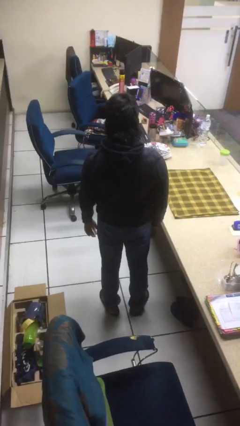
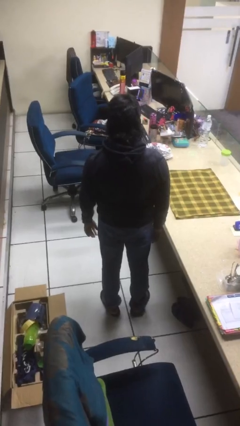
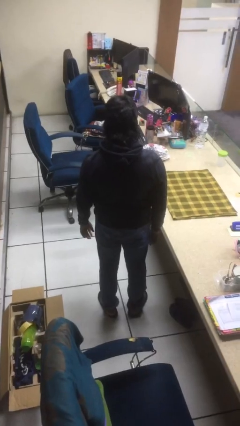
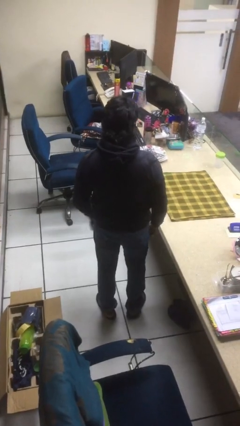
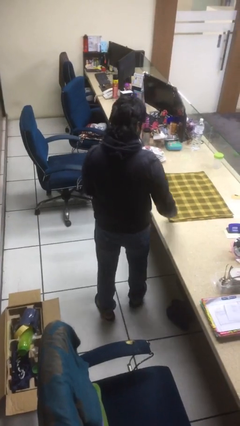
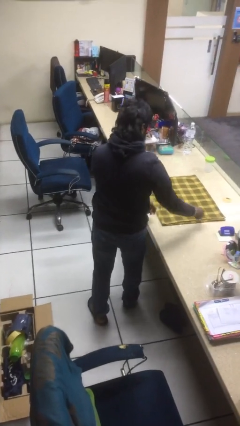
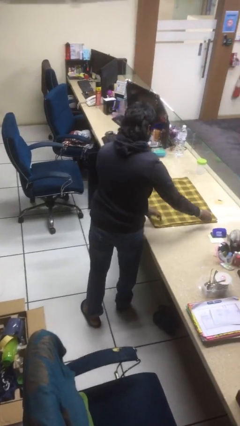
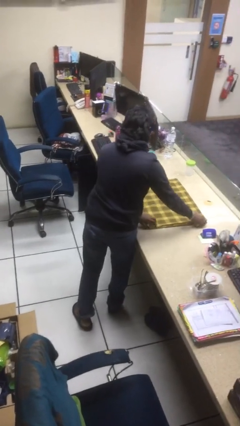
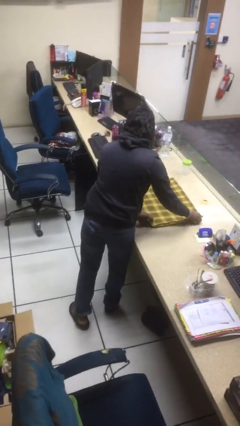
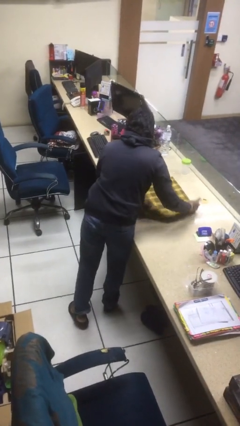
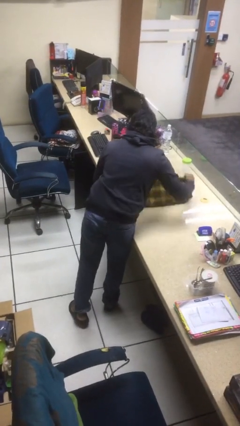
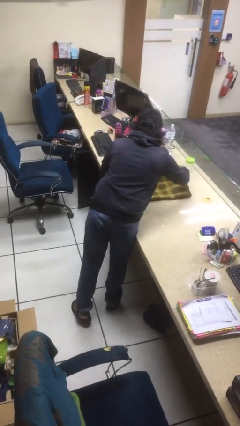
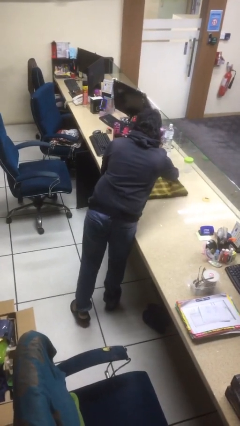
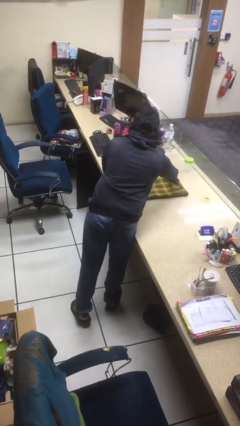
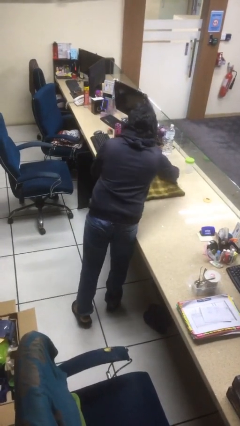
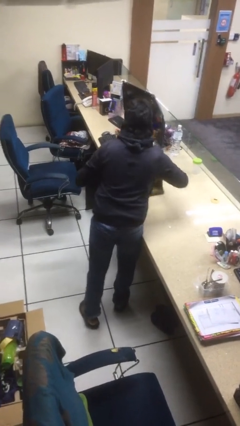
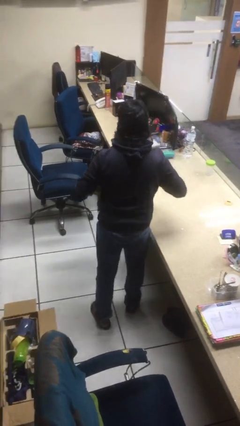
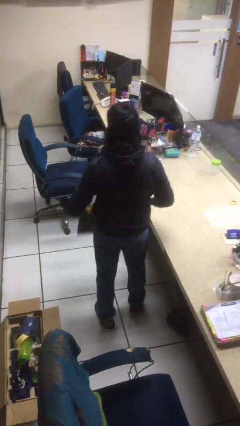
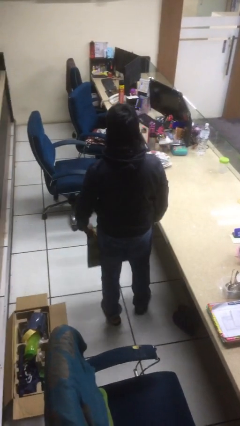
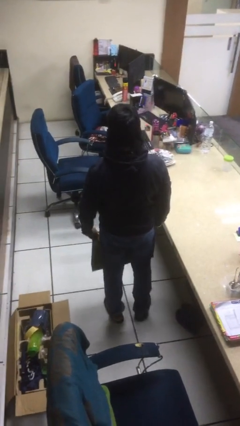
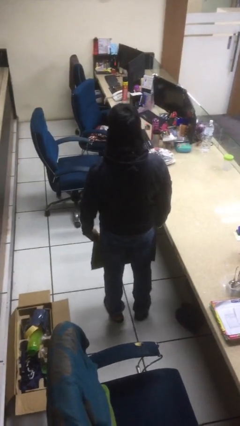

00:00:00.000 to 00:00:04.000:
person folds tablecloth

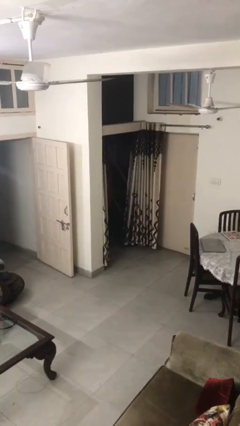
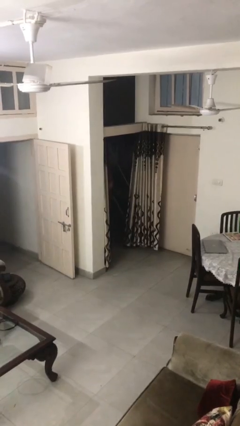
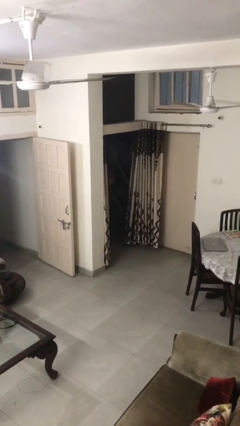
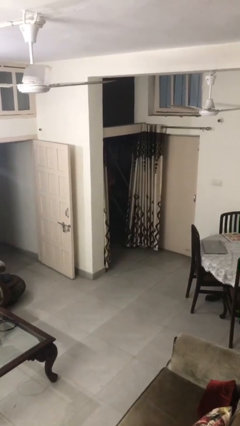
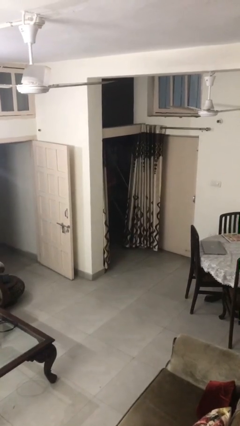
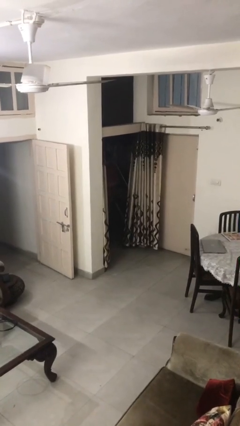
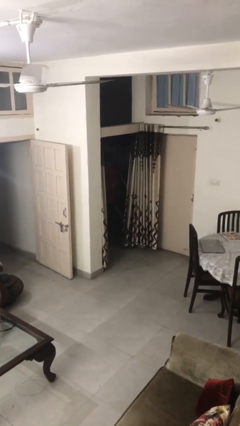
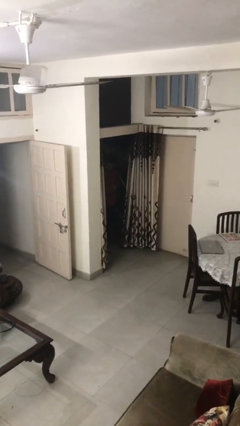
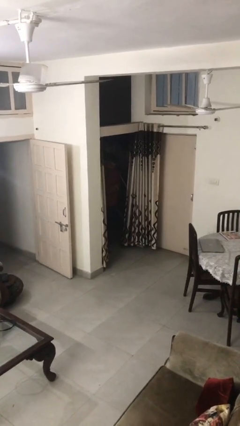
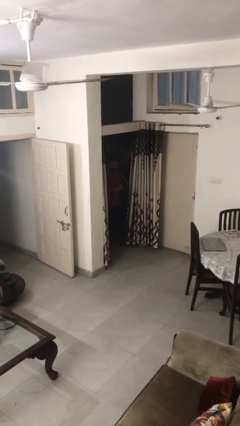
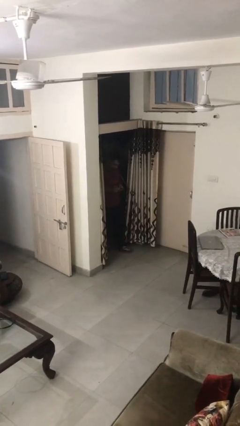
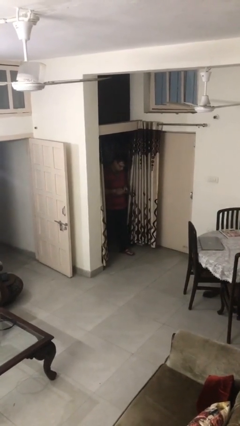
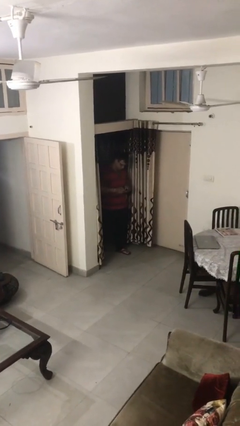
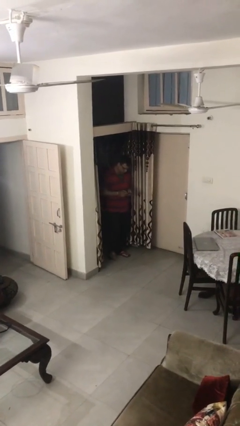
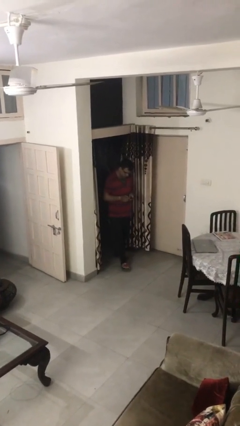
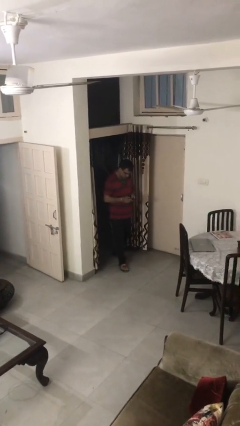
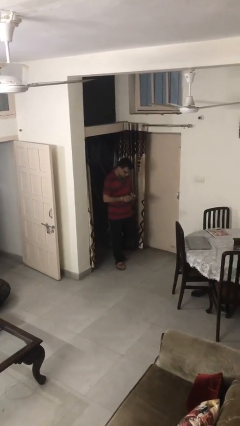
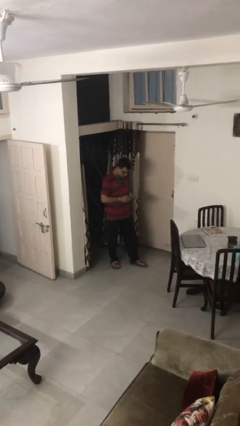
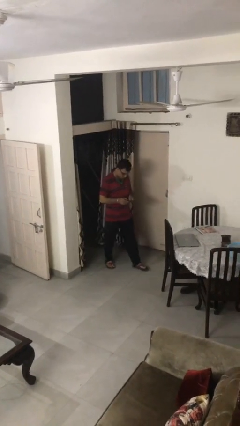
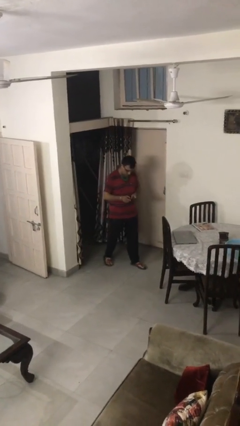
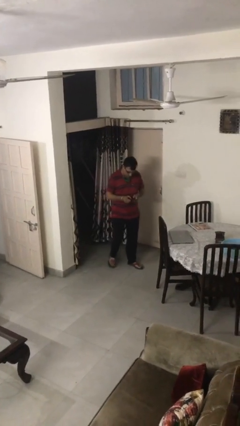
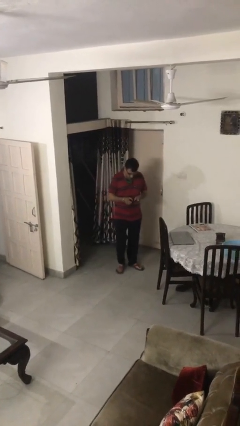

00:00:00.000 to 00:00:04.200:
person enters scene through structure

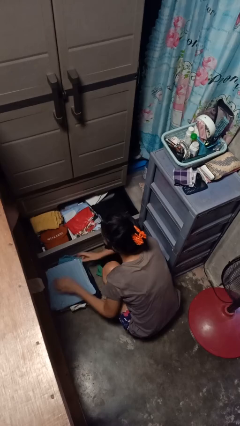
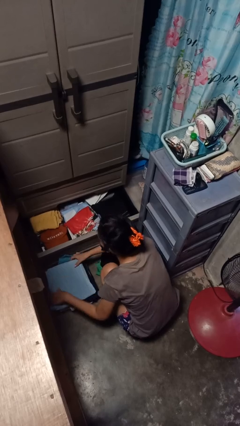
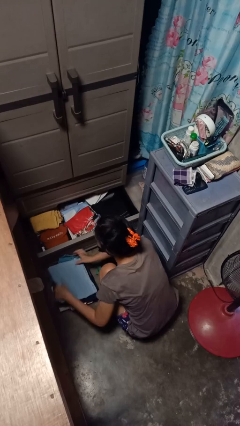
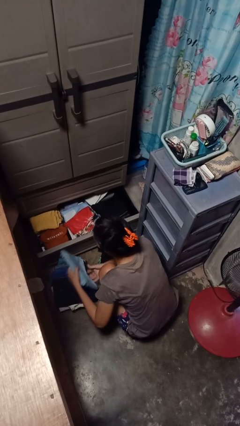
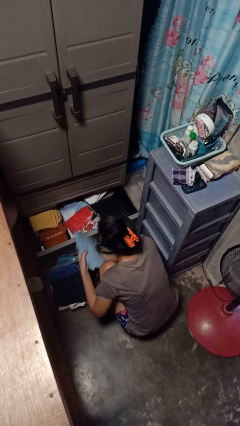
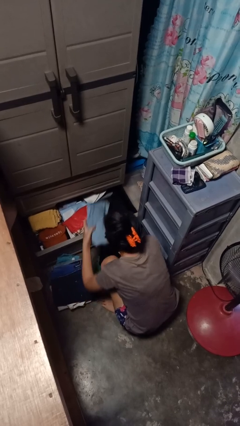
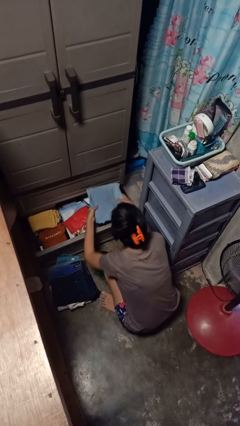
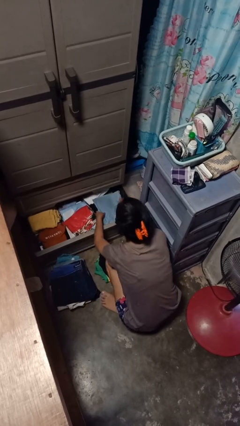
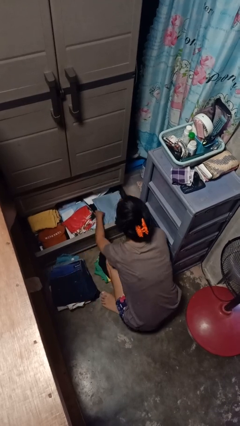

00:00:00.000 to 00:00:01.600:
person puts clothes into dresser

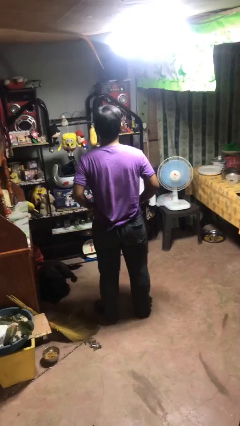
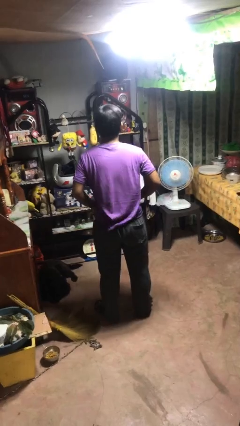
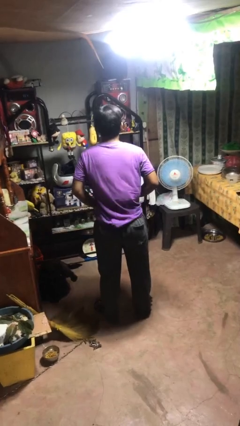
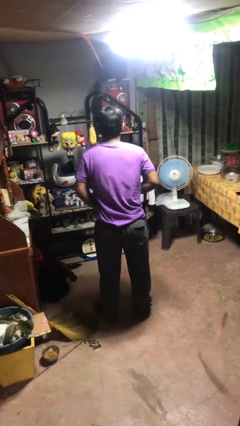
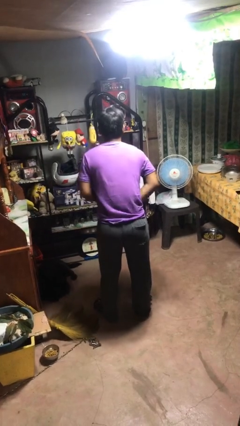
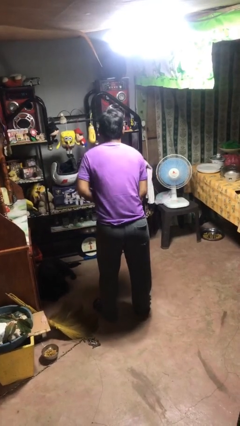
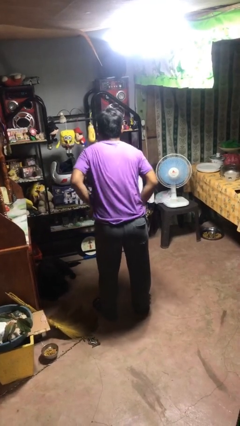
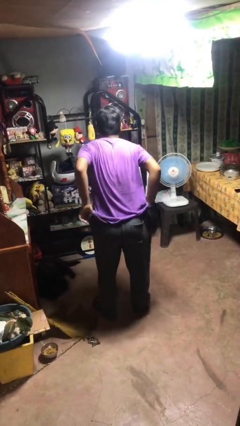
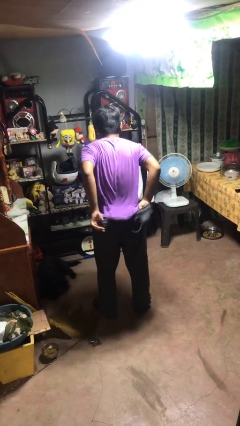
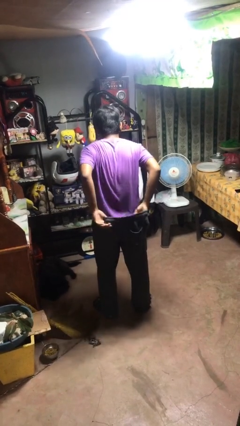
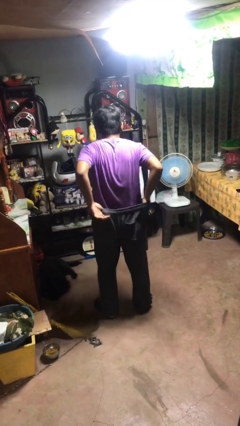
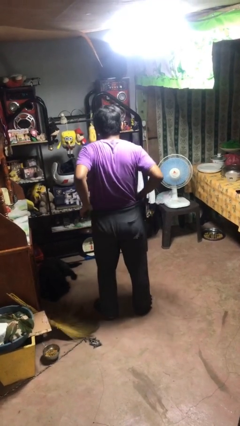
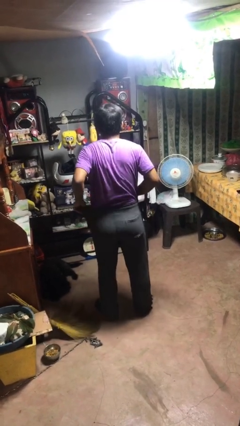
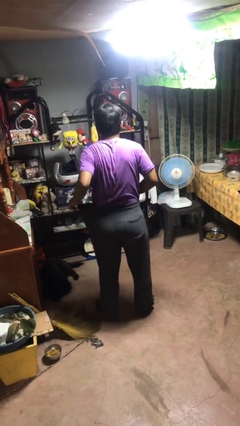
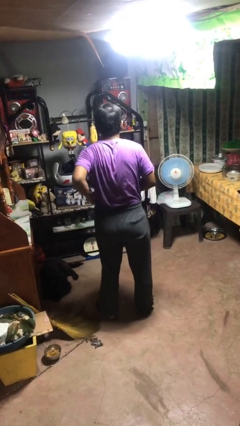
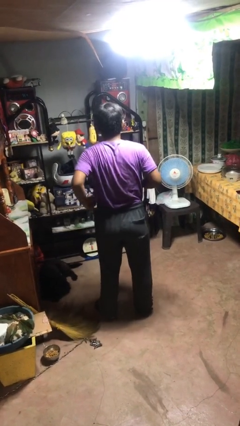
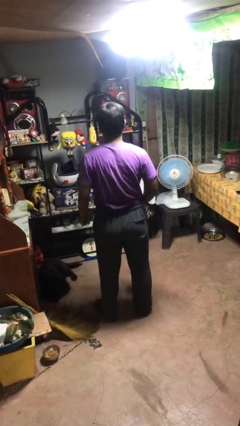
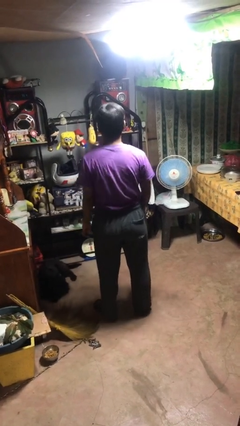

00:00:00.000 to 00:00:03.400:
person tucks in shirt

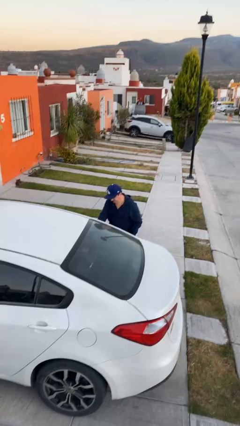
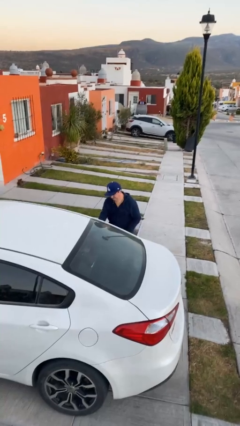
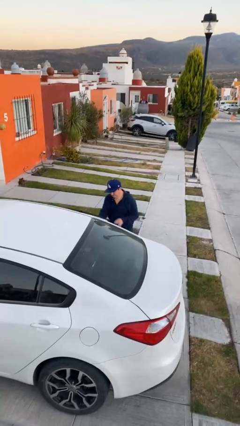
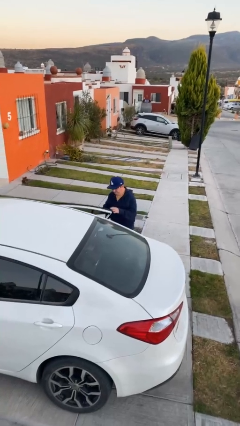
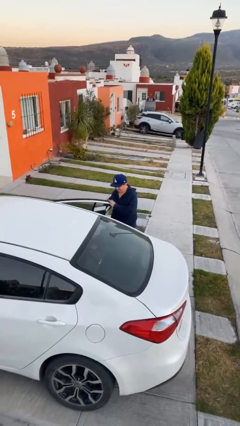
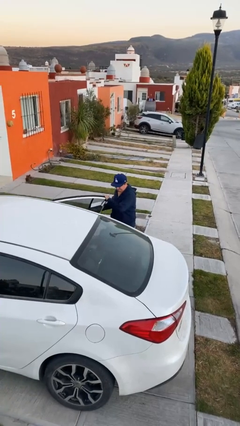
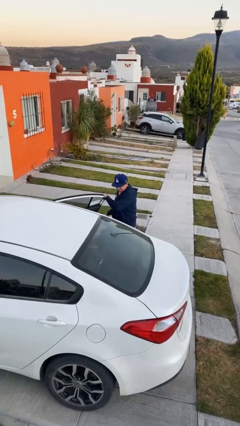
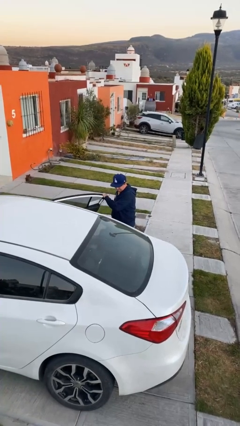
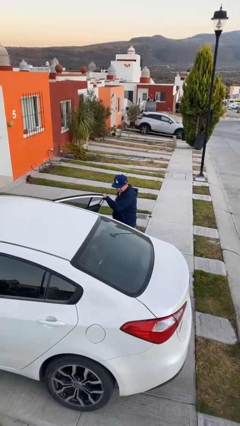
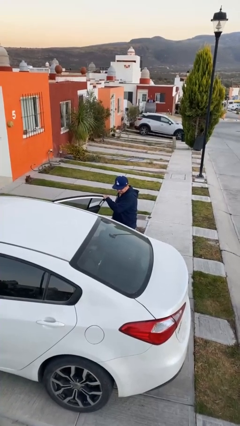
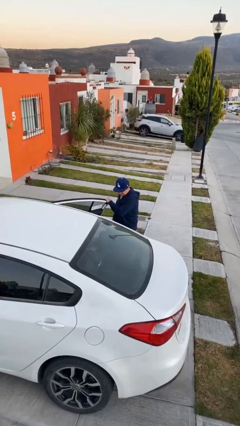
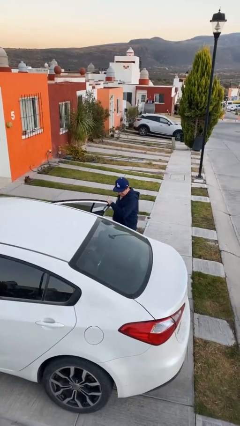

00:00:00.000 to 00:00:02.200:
person opens car door

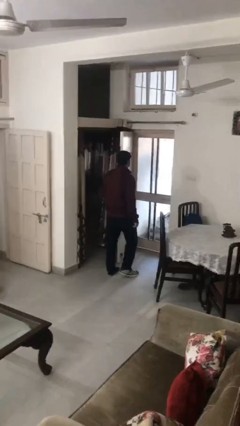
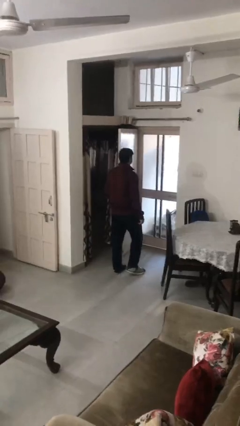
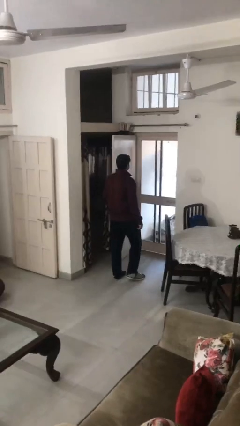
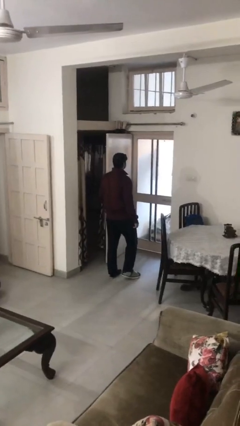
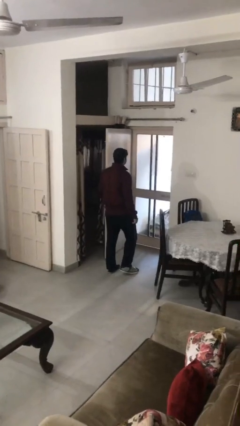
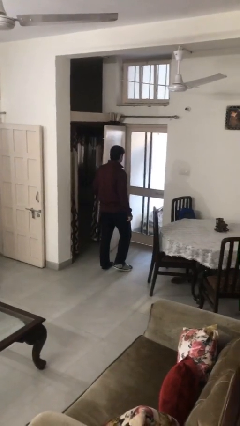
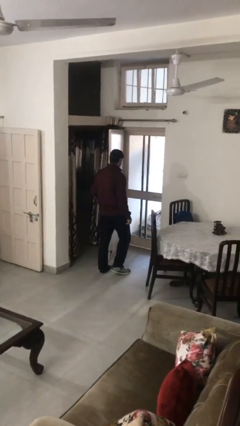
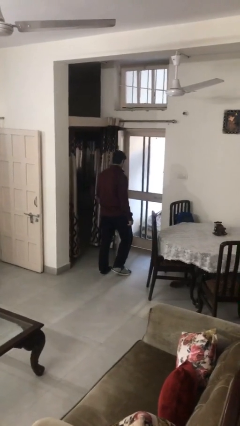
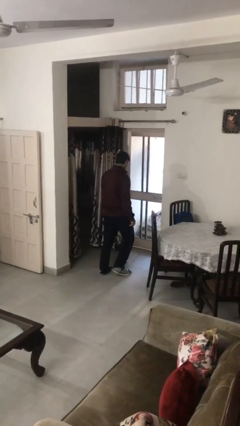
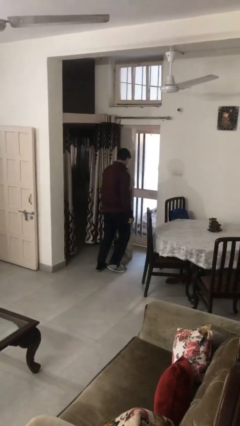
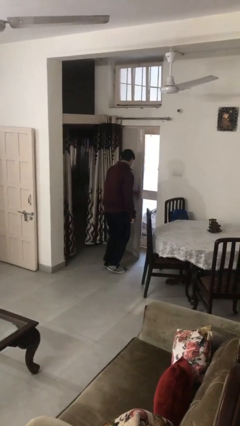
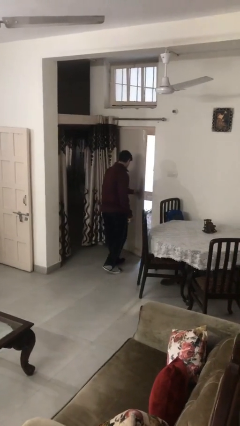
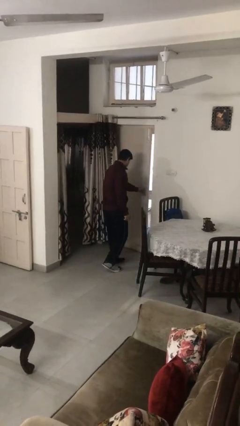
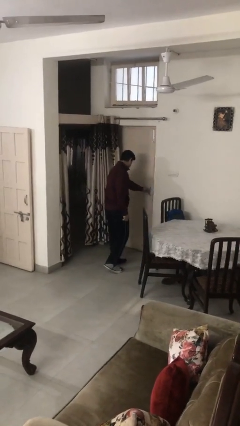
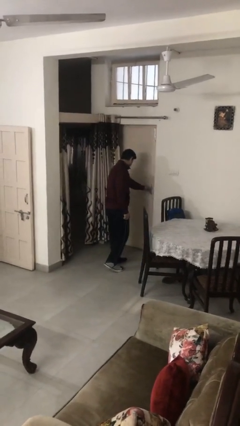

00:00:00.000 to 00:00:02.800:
person closes facility door
